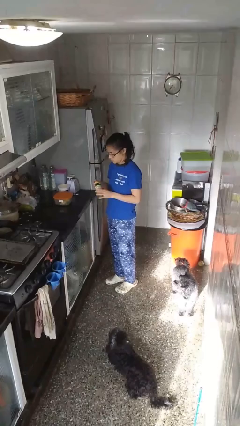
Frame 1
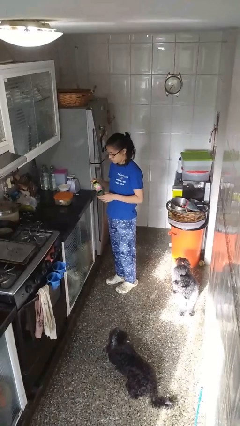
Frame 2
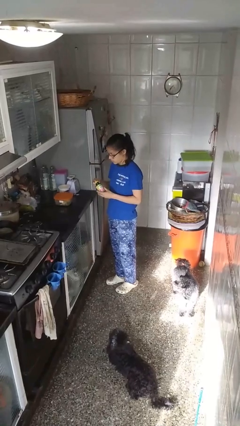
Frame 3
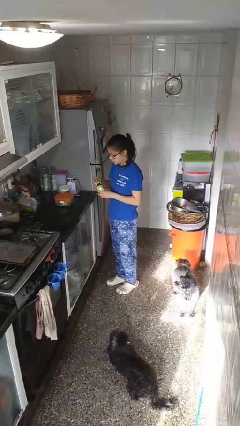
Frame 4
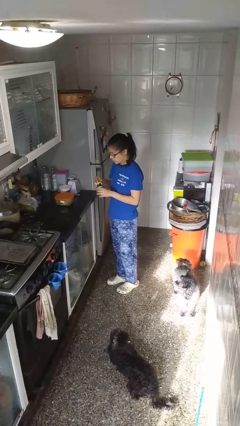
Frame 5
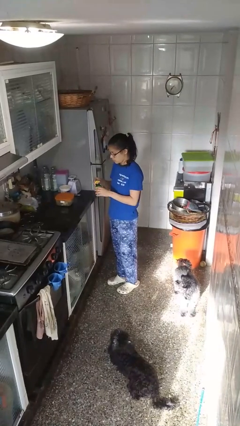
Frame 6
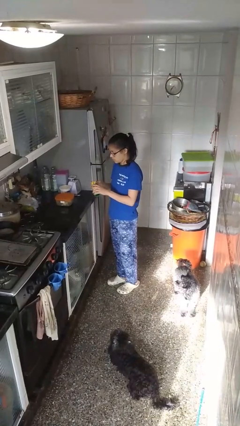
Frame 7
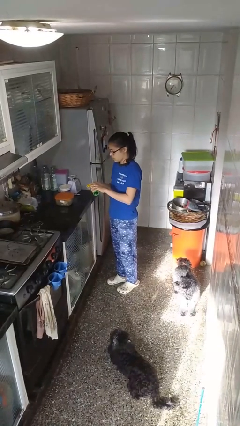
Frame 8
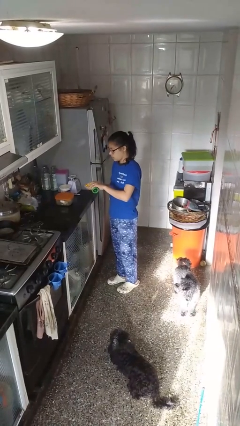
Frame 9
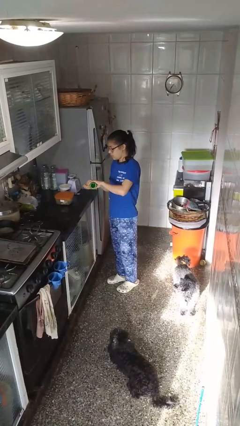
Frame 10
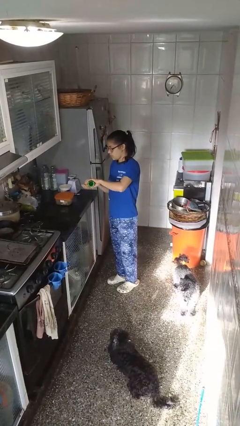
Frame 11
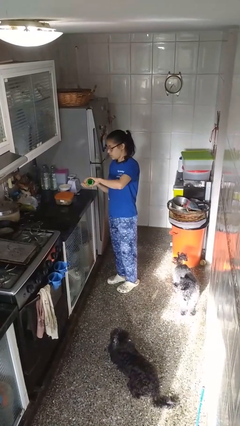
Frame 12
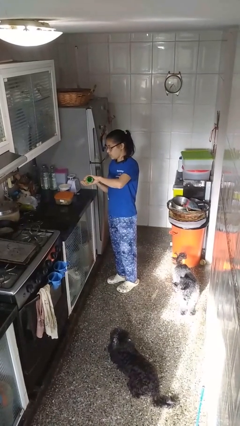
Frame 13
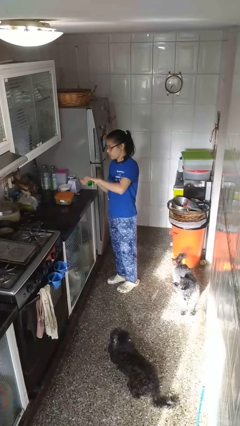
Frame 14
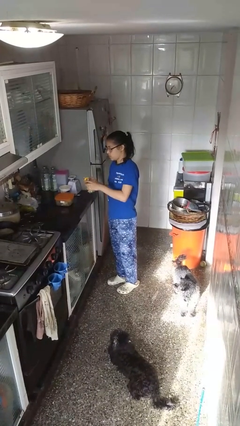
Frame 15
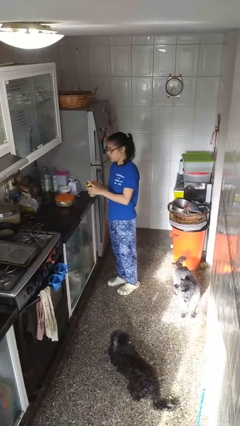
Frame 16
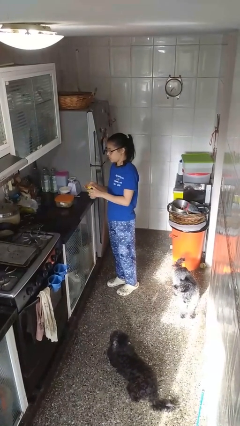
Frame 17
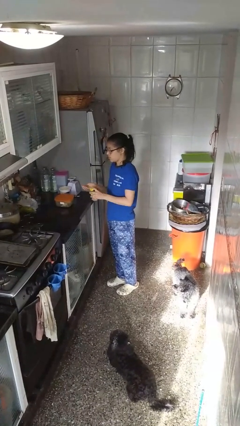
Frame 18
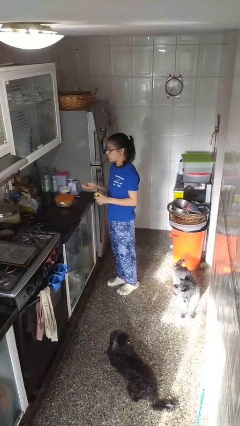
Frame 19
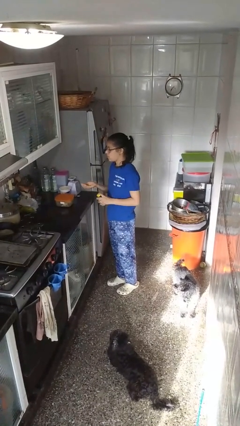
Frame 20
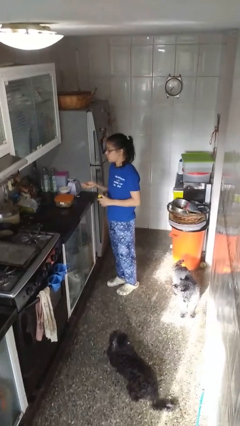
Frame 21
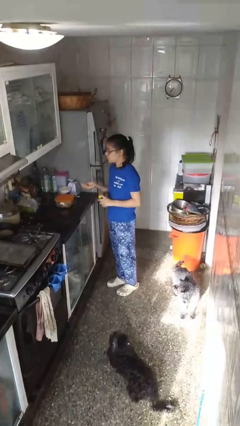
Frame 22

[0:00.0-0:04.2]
person takes medicine pills

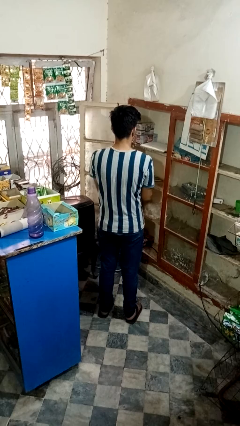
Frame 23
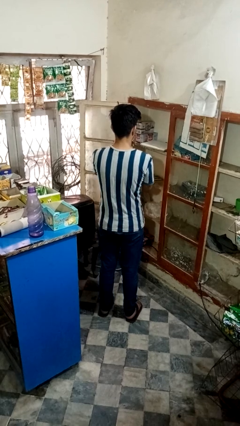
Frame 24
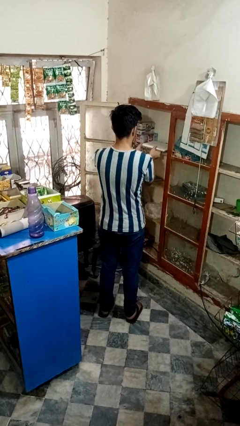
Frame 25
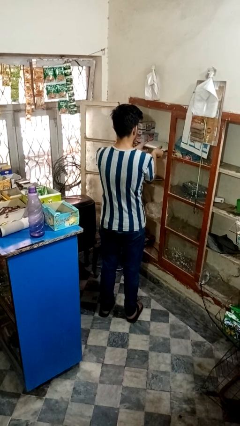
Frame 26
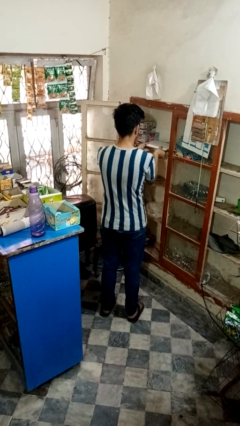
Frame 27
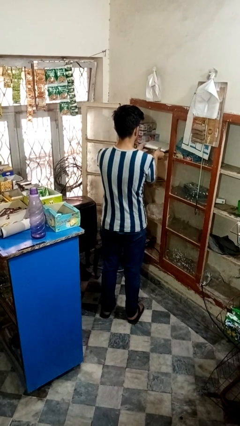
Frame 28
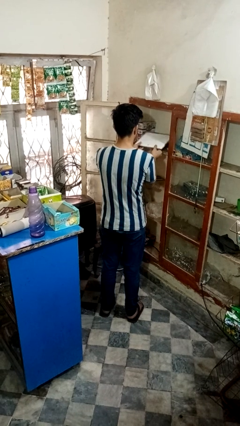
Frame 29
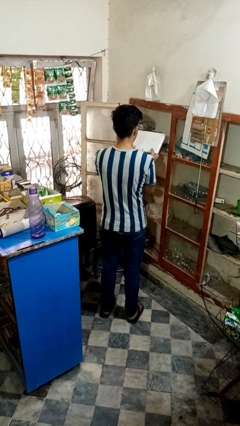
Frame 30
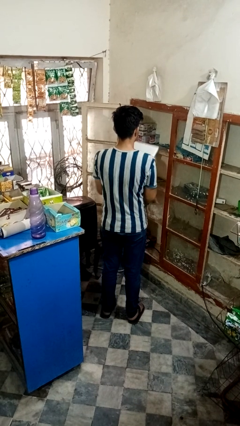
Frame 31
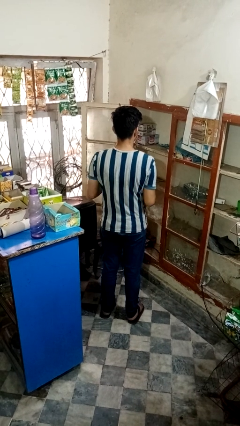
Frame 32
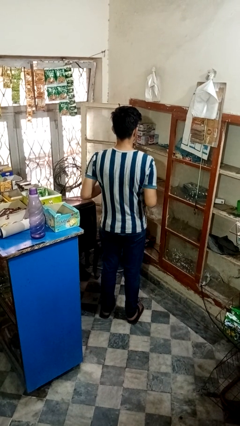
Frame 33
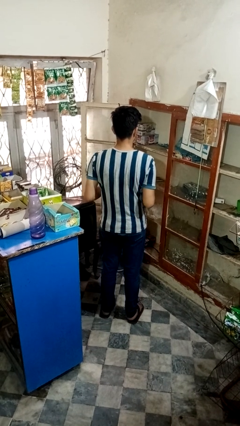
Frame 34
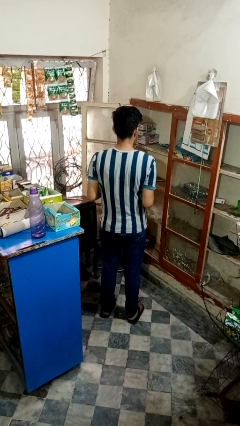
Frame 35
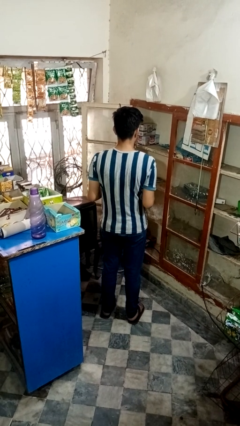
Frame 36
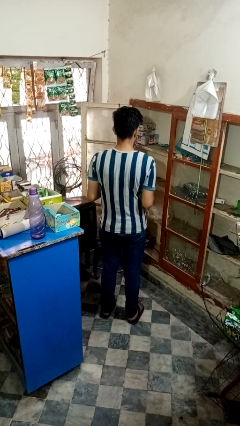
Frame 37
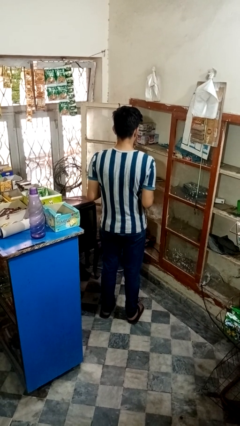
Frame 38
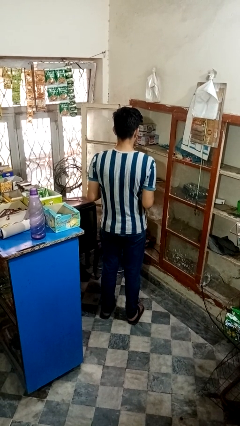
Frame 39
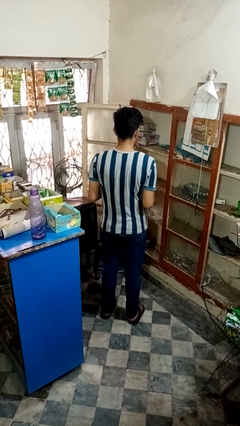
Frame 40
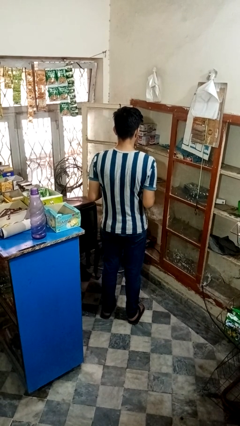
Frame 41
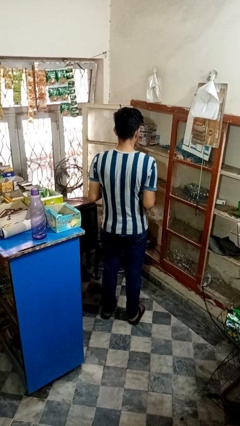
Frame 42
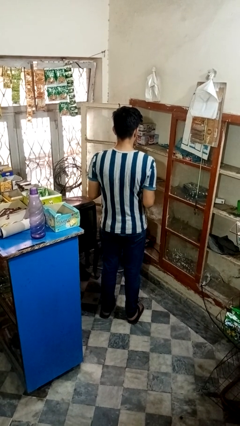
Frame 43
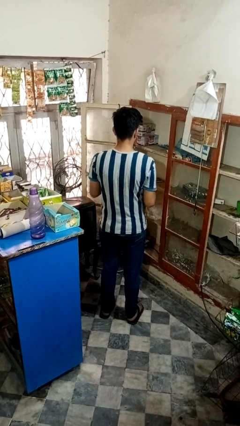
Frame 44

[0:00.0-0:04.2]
person picks up object from cabinet

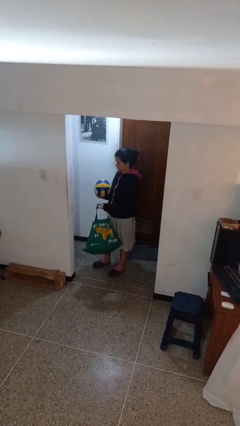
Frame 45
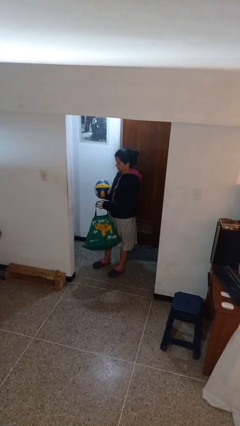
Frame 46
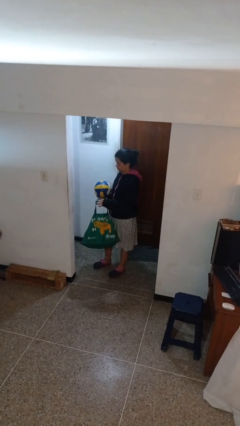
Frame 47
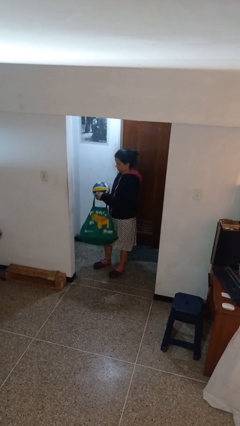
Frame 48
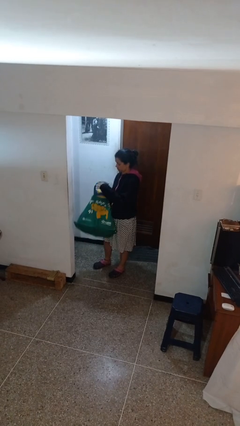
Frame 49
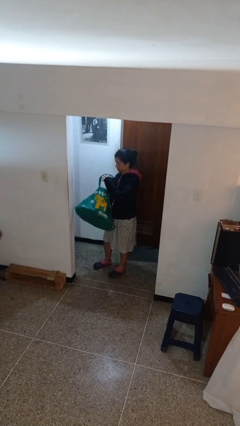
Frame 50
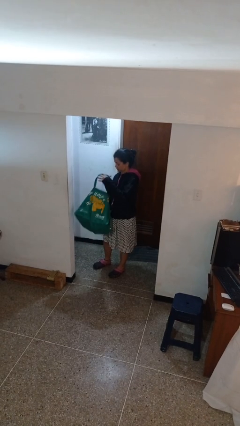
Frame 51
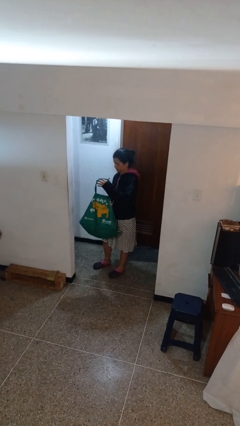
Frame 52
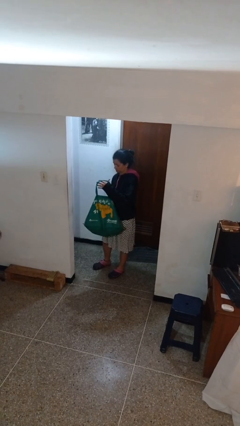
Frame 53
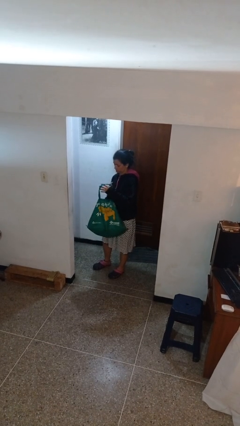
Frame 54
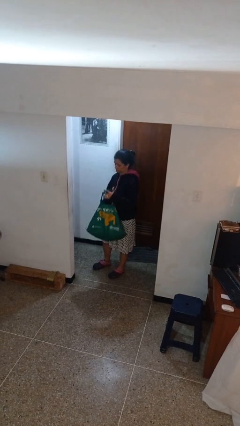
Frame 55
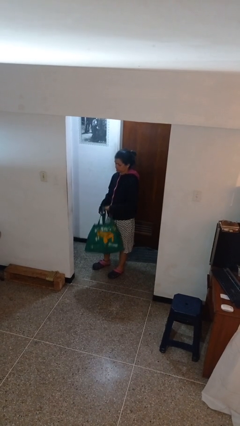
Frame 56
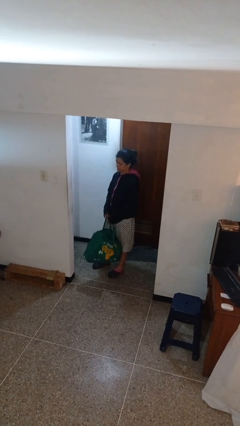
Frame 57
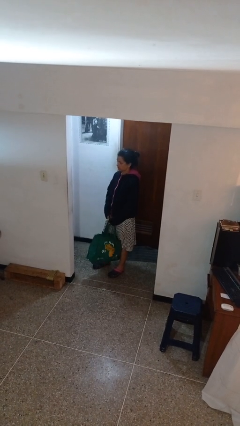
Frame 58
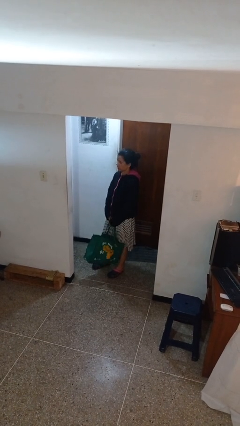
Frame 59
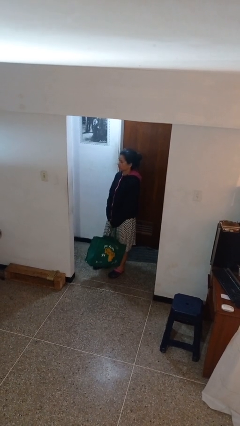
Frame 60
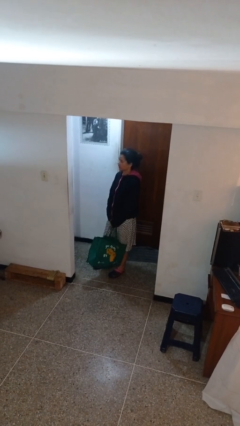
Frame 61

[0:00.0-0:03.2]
person puts object into bag

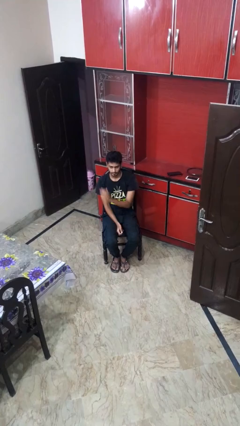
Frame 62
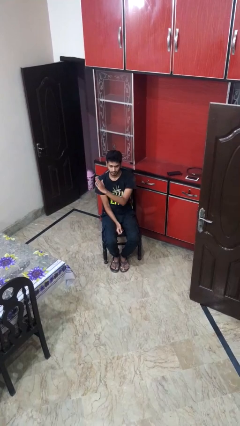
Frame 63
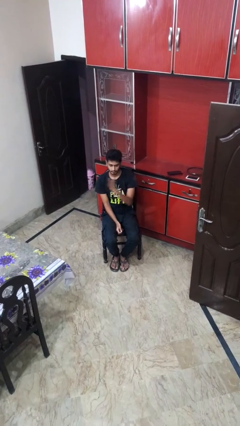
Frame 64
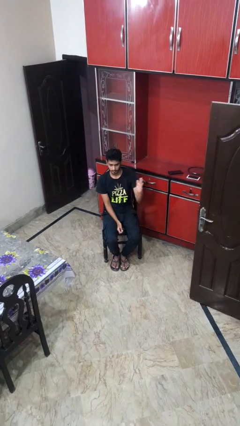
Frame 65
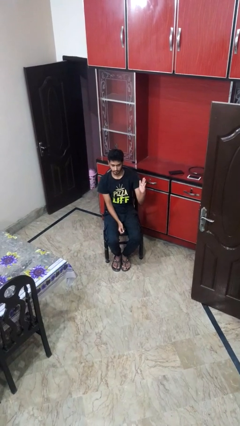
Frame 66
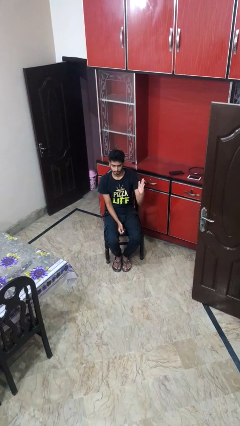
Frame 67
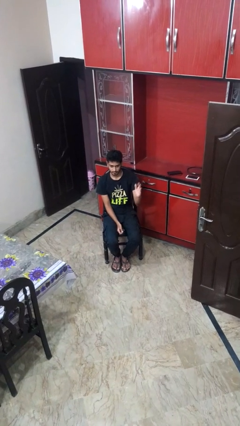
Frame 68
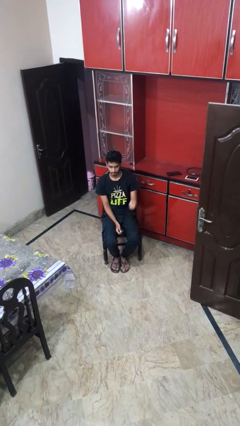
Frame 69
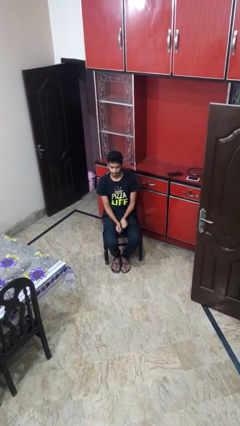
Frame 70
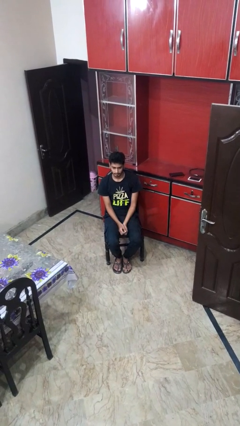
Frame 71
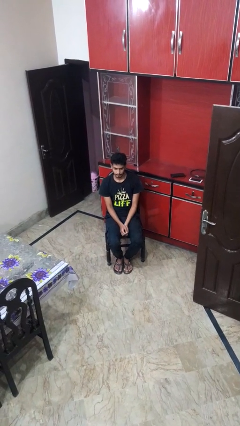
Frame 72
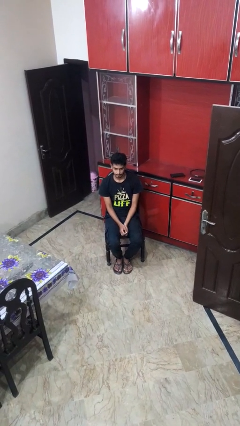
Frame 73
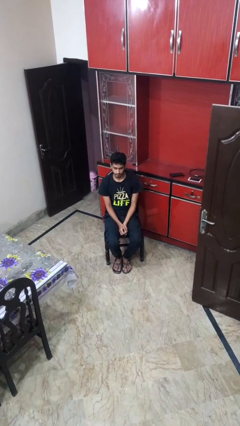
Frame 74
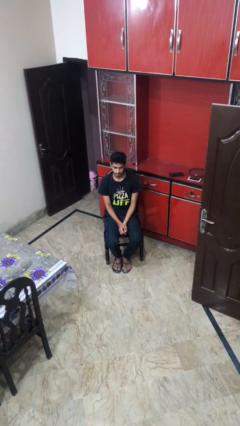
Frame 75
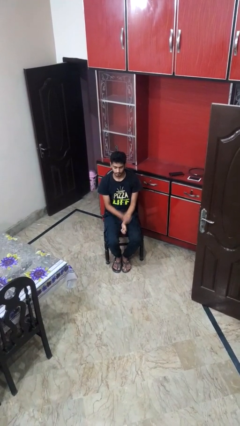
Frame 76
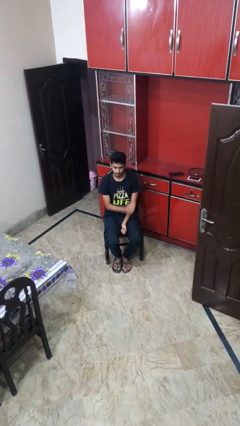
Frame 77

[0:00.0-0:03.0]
person gestures swipe left

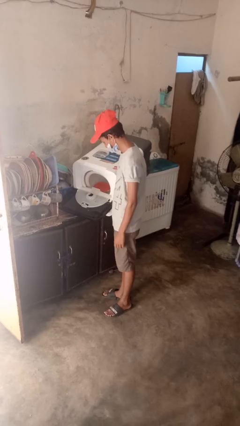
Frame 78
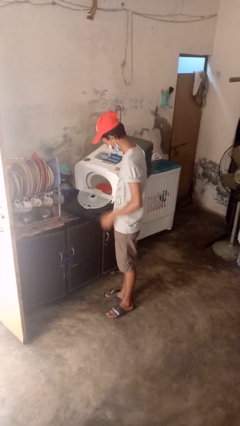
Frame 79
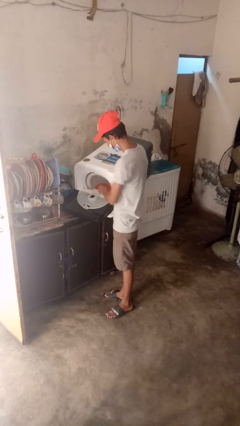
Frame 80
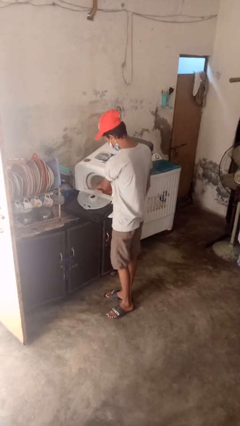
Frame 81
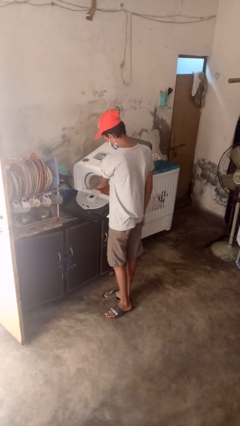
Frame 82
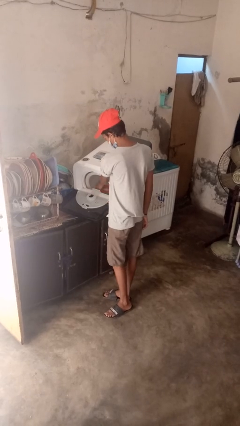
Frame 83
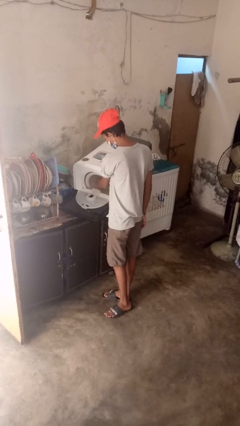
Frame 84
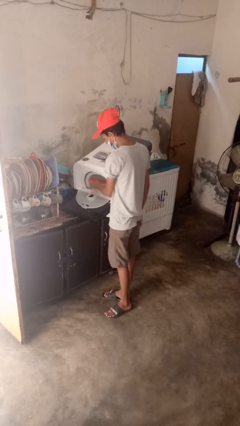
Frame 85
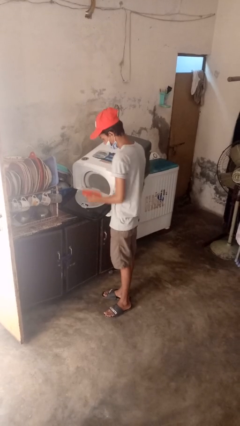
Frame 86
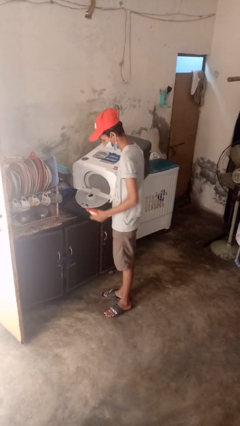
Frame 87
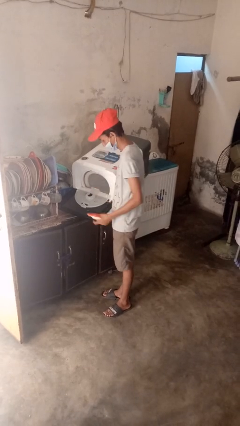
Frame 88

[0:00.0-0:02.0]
person unloads dishwasher

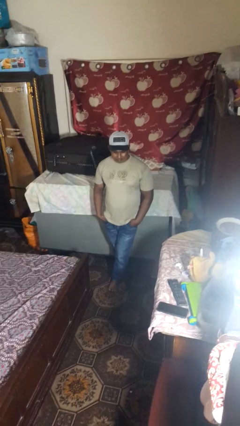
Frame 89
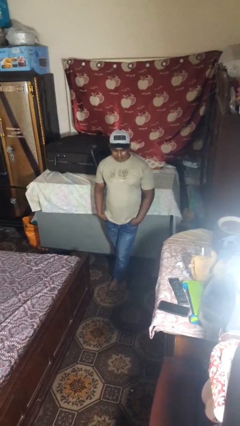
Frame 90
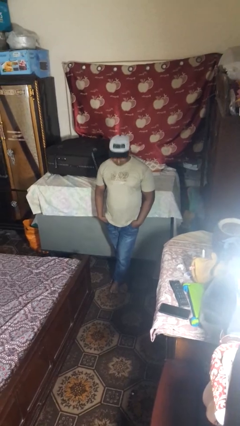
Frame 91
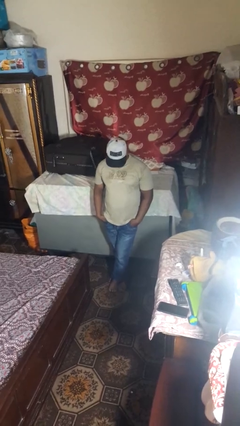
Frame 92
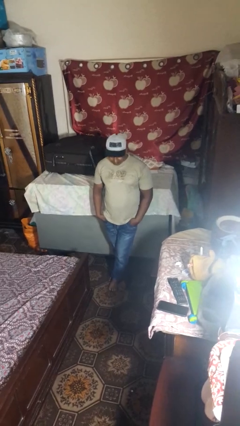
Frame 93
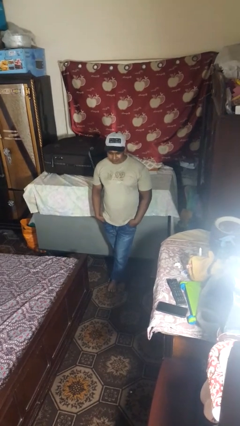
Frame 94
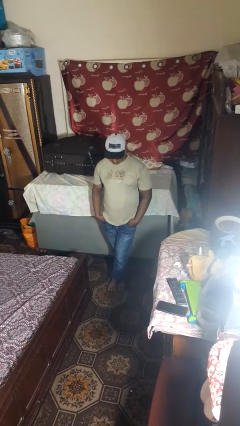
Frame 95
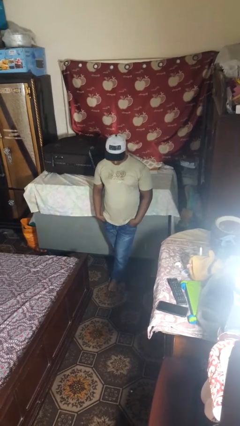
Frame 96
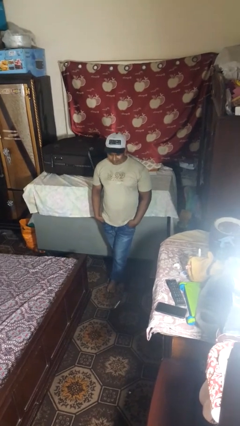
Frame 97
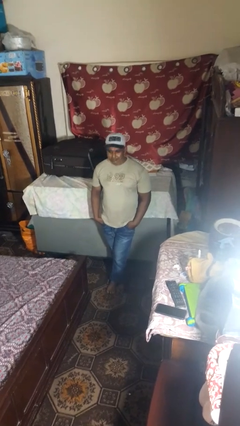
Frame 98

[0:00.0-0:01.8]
person nods head
